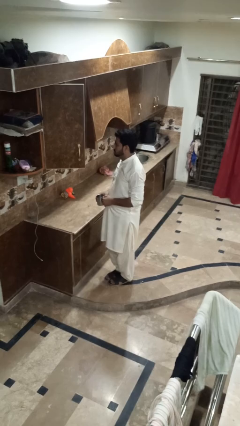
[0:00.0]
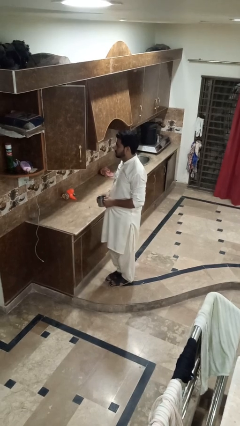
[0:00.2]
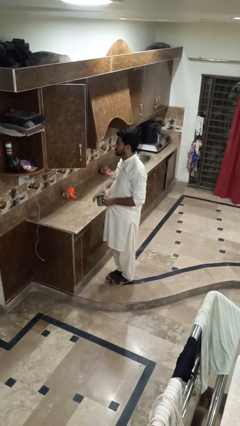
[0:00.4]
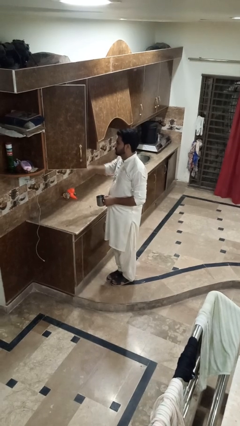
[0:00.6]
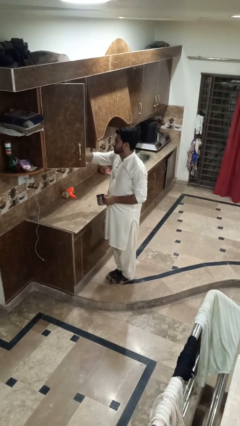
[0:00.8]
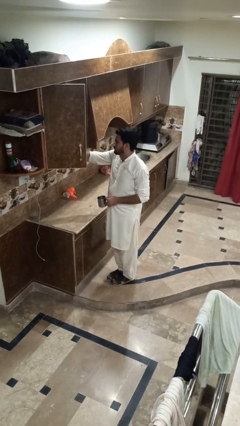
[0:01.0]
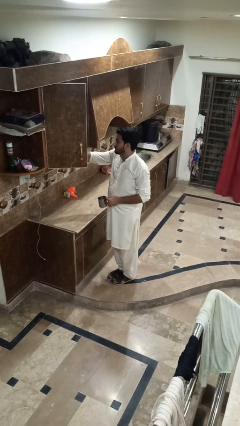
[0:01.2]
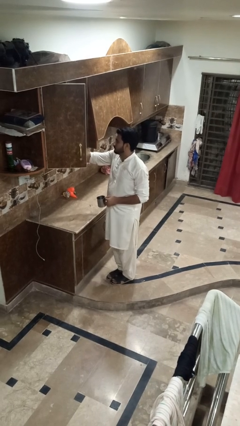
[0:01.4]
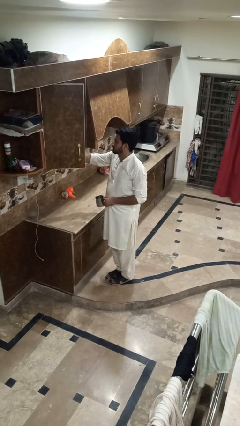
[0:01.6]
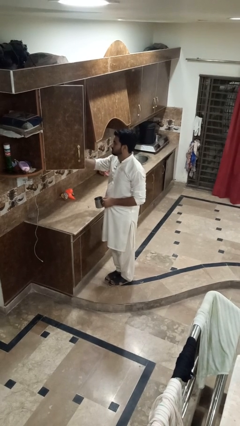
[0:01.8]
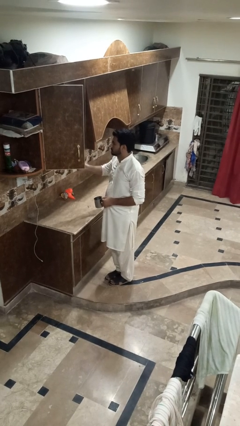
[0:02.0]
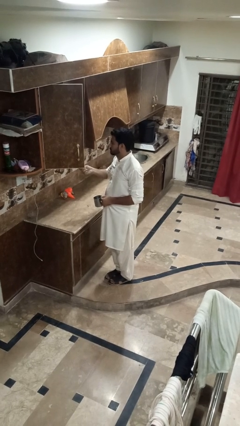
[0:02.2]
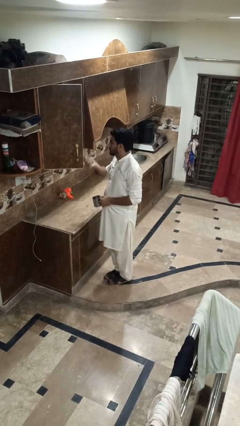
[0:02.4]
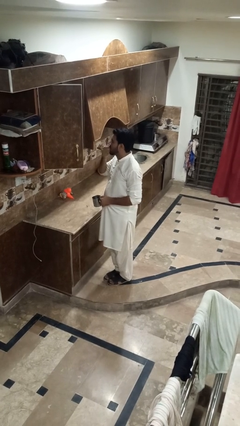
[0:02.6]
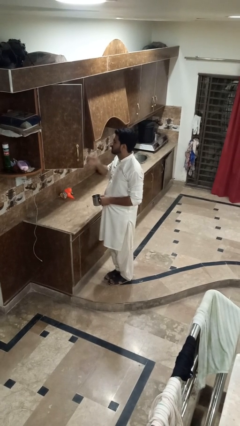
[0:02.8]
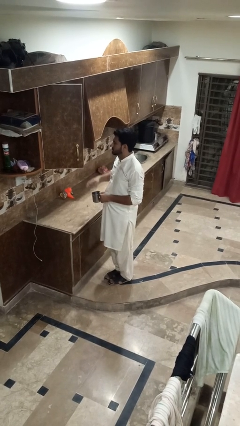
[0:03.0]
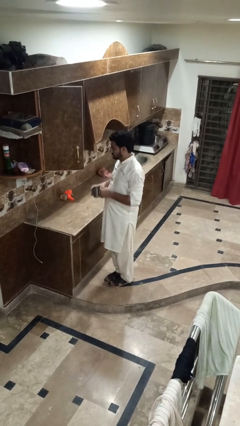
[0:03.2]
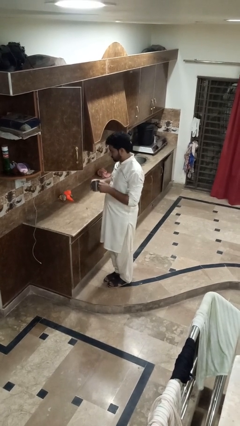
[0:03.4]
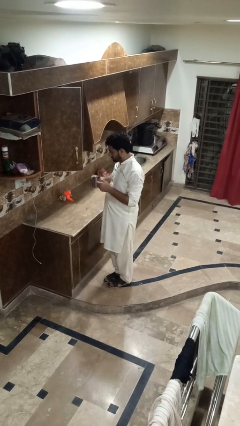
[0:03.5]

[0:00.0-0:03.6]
person takes medicine pills

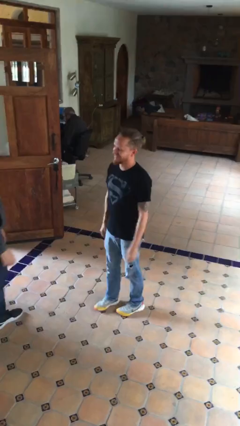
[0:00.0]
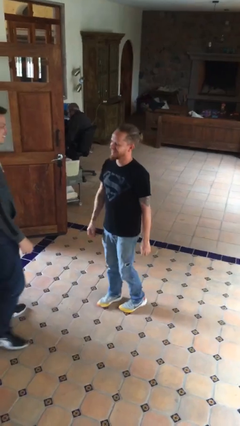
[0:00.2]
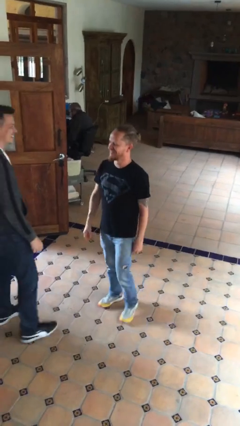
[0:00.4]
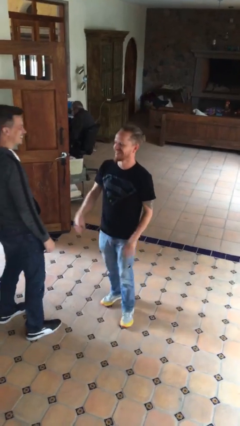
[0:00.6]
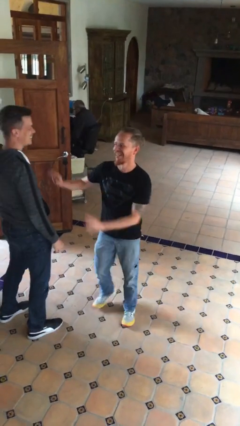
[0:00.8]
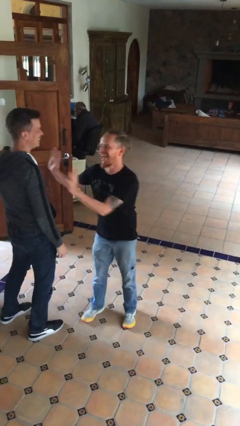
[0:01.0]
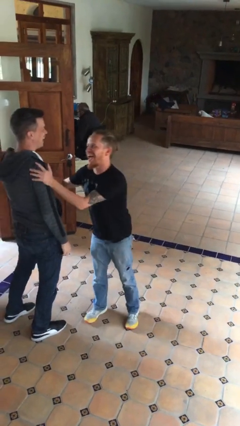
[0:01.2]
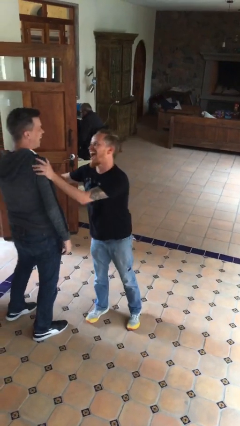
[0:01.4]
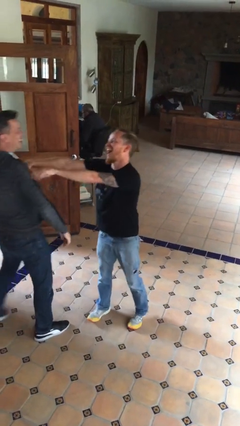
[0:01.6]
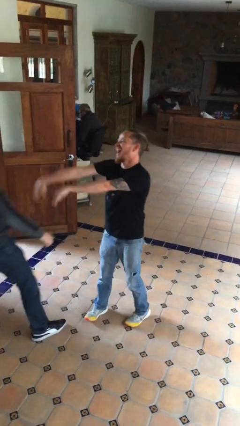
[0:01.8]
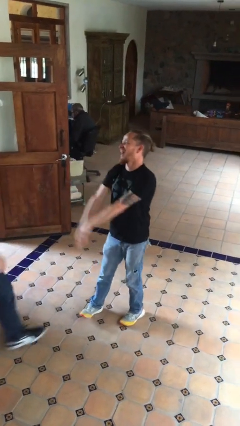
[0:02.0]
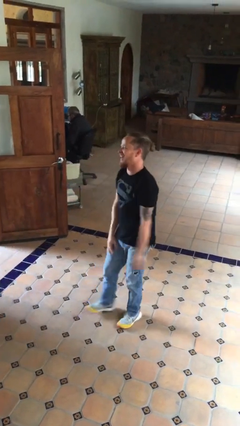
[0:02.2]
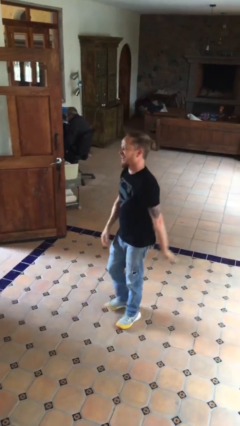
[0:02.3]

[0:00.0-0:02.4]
person shoves person

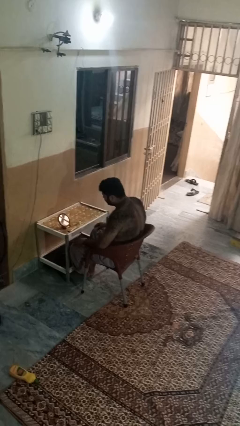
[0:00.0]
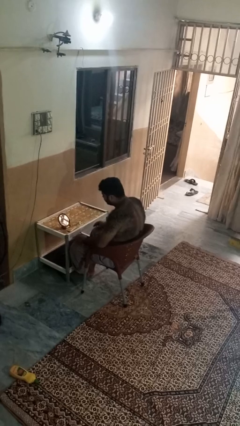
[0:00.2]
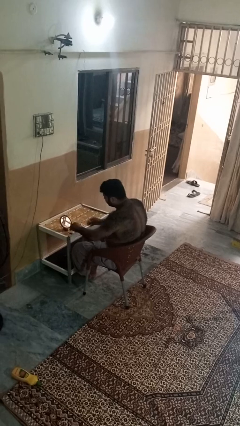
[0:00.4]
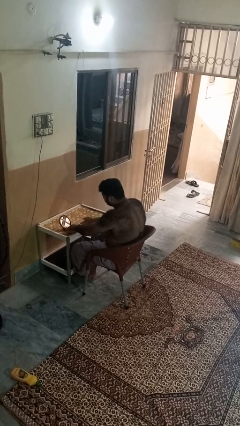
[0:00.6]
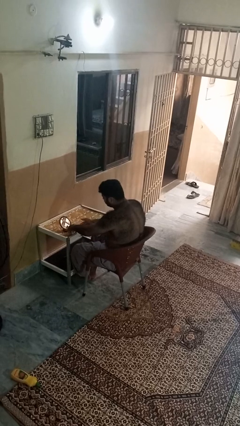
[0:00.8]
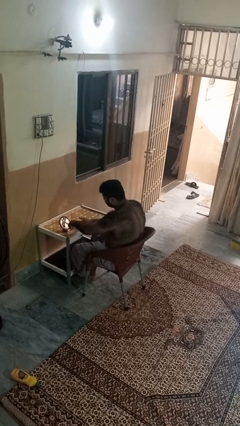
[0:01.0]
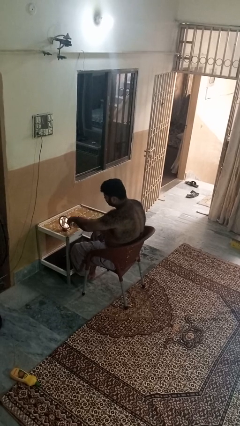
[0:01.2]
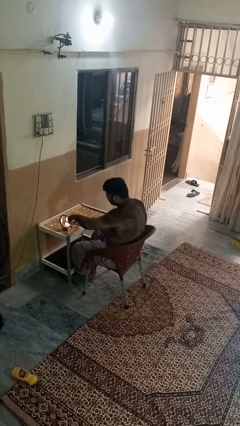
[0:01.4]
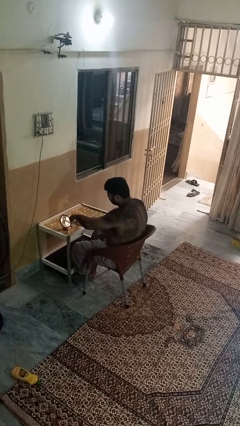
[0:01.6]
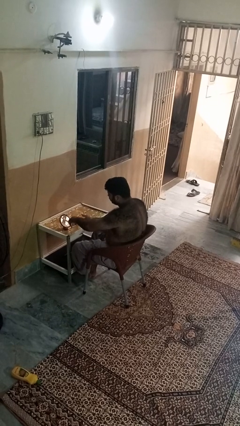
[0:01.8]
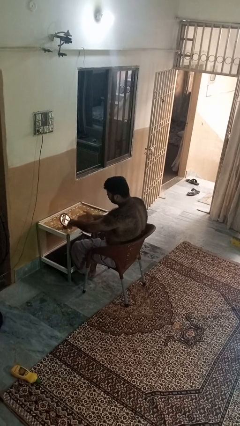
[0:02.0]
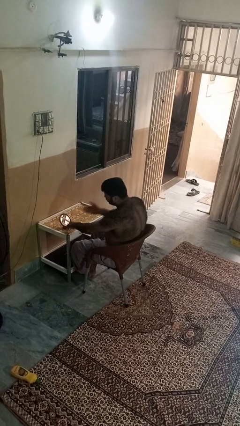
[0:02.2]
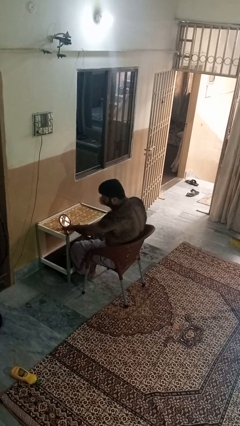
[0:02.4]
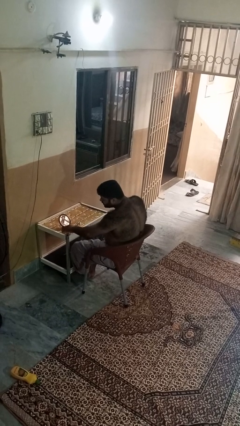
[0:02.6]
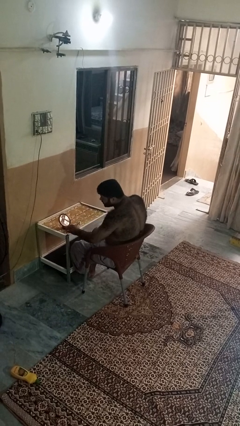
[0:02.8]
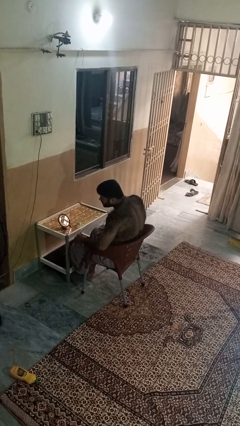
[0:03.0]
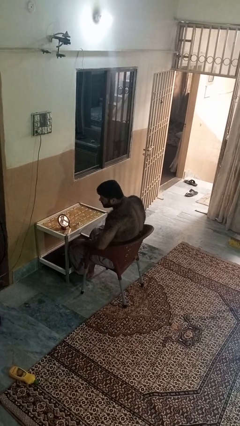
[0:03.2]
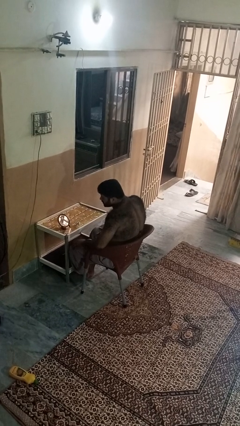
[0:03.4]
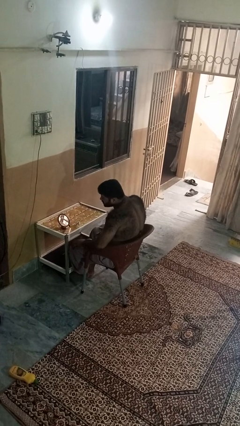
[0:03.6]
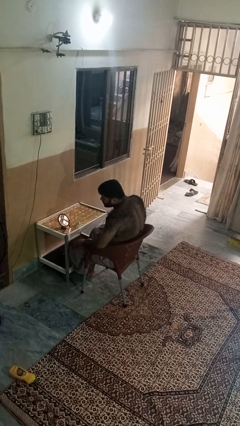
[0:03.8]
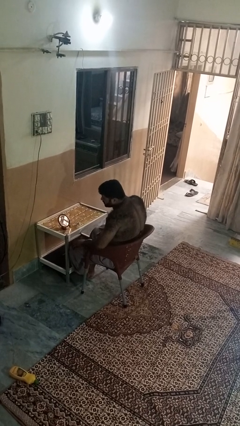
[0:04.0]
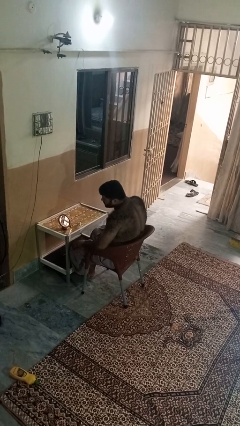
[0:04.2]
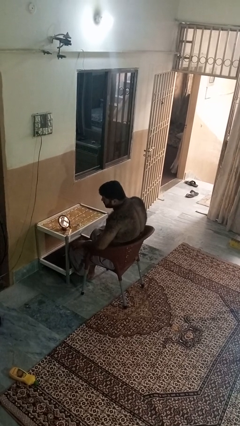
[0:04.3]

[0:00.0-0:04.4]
person applies foundation makeup

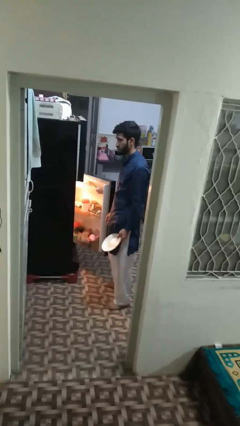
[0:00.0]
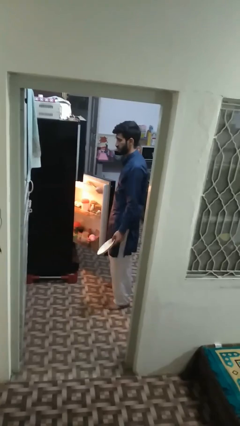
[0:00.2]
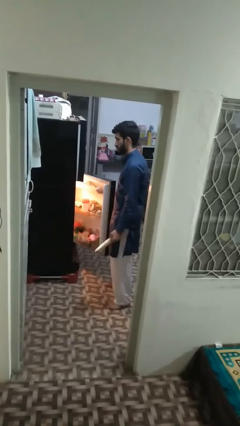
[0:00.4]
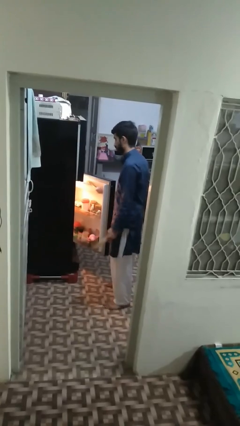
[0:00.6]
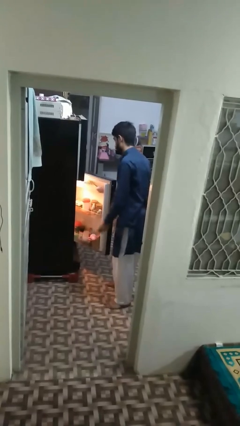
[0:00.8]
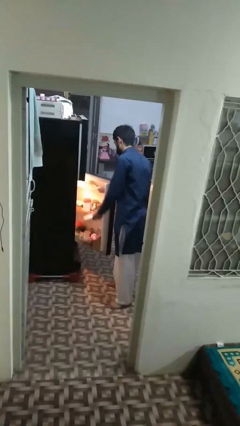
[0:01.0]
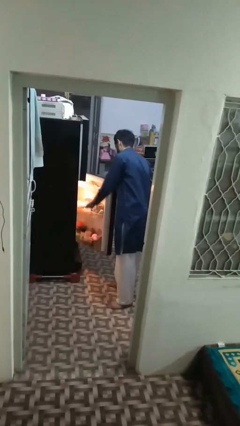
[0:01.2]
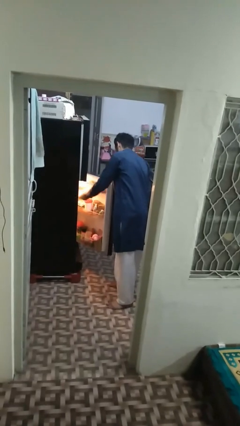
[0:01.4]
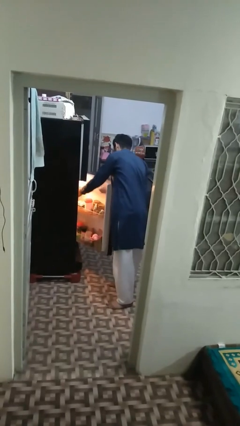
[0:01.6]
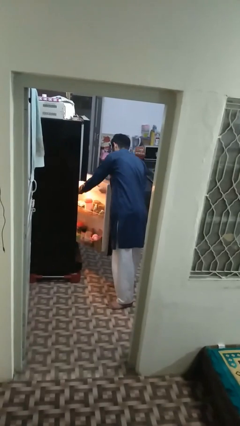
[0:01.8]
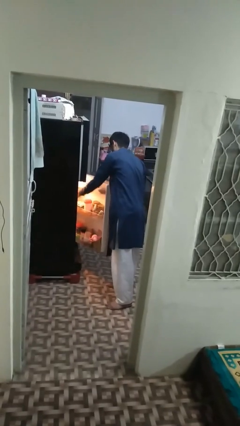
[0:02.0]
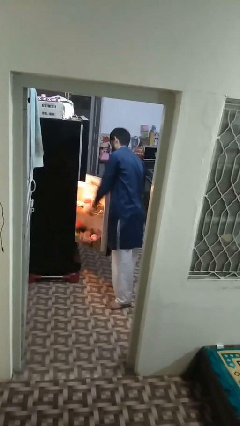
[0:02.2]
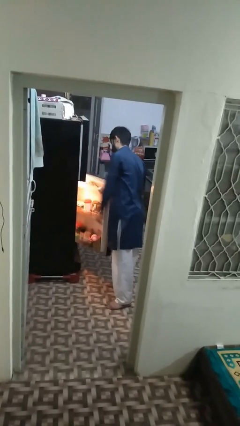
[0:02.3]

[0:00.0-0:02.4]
person puts object into refrigerator

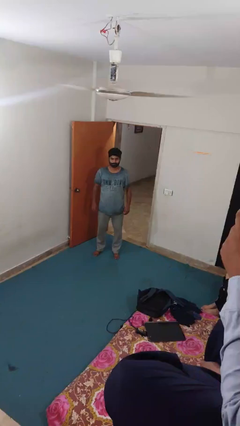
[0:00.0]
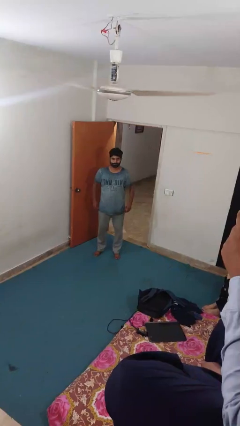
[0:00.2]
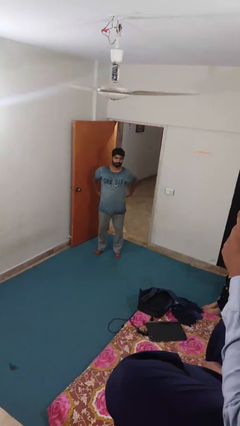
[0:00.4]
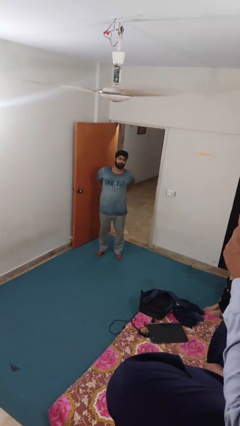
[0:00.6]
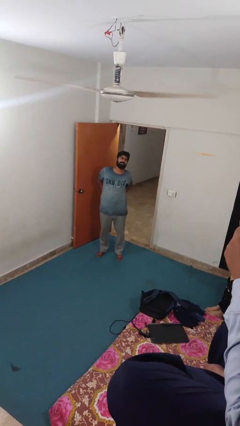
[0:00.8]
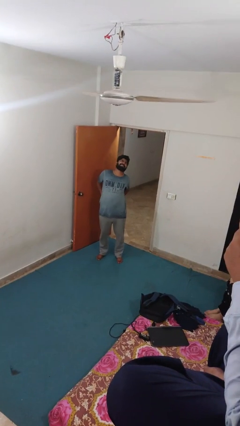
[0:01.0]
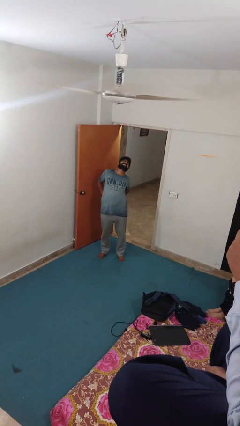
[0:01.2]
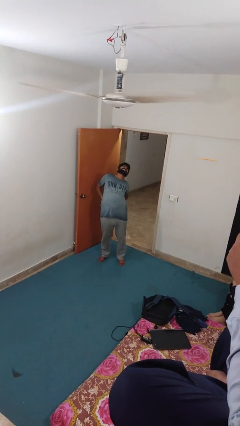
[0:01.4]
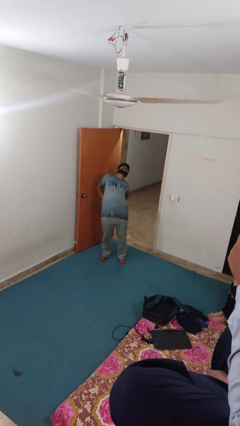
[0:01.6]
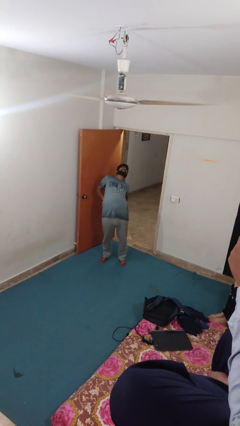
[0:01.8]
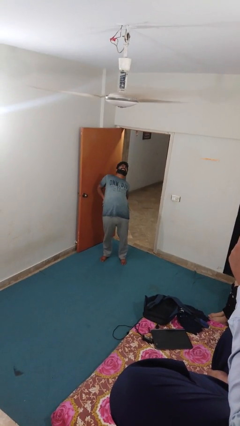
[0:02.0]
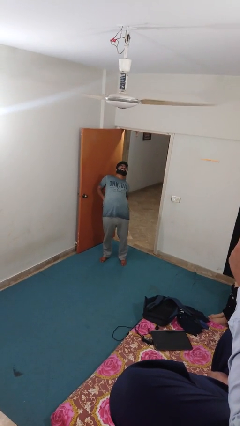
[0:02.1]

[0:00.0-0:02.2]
person stretches back

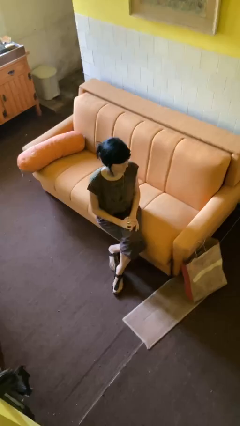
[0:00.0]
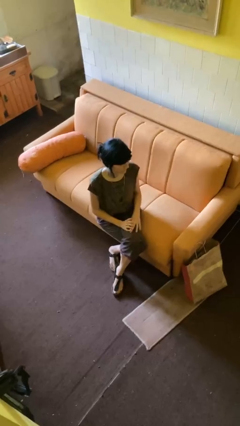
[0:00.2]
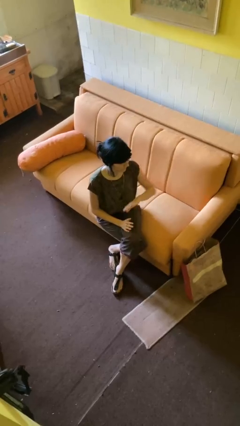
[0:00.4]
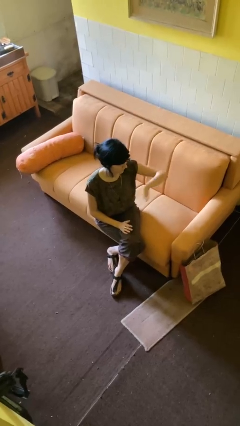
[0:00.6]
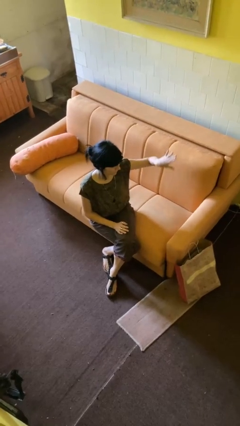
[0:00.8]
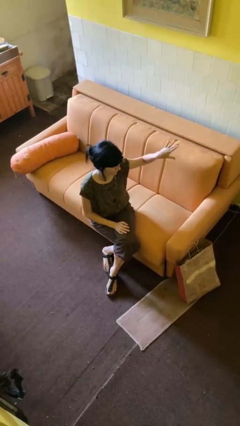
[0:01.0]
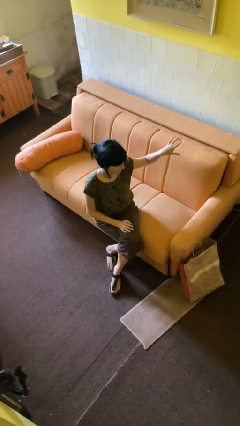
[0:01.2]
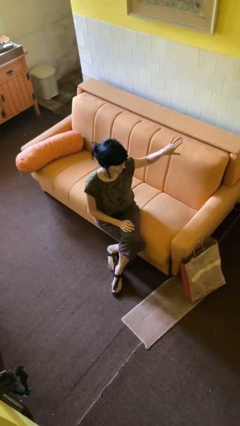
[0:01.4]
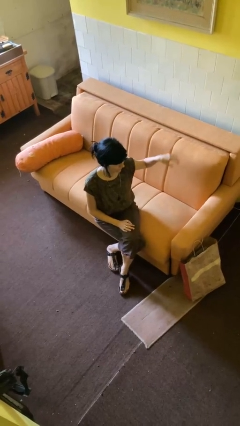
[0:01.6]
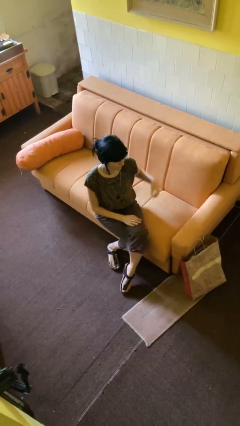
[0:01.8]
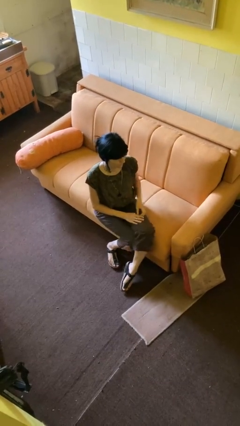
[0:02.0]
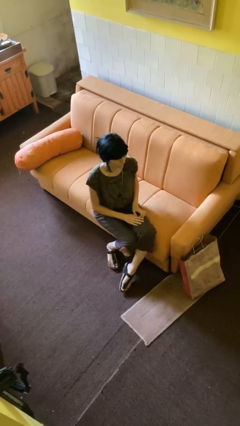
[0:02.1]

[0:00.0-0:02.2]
person gestures swipe left
